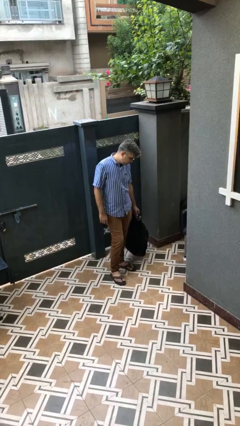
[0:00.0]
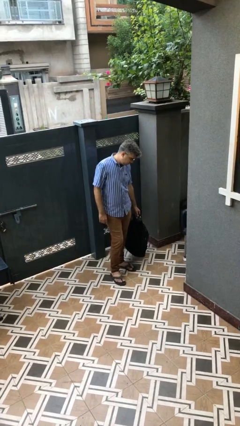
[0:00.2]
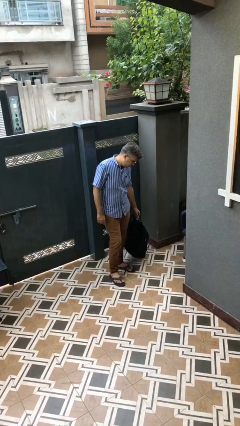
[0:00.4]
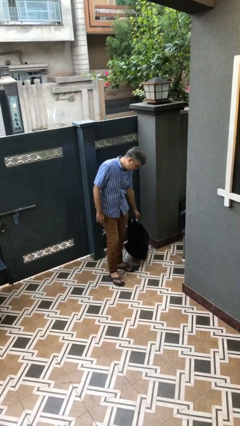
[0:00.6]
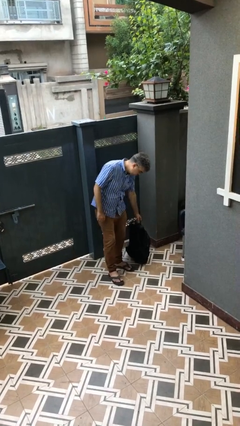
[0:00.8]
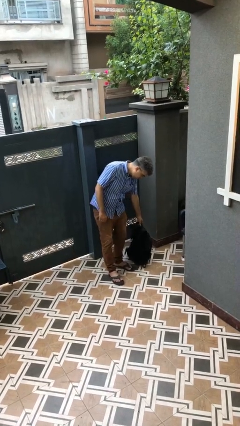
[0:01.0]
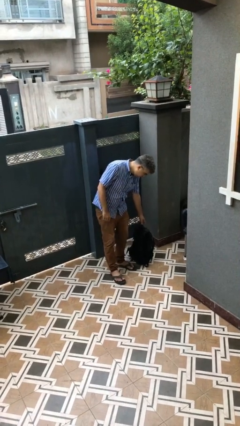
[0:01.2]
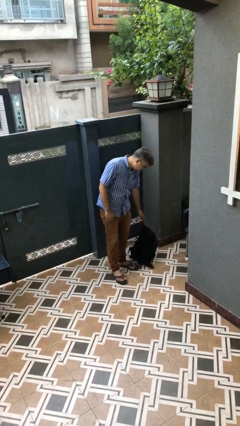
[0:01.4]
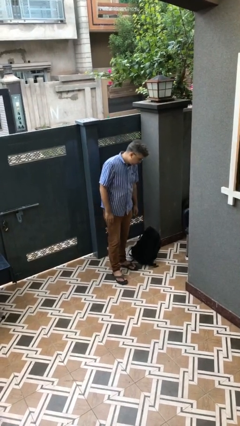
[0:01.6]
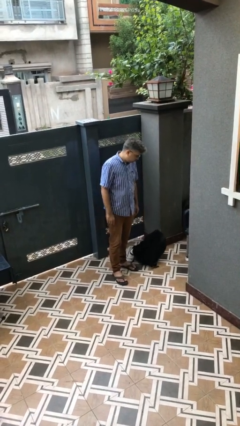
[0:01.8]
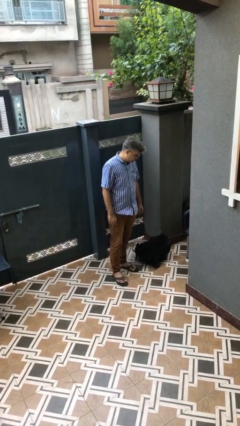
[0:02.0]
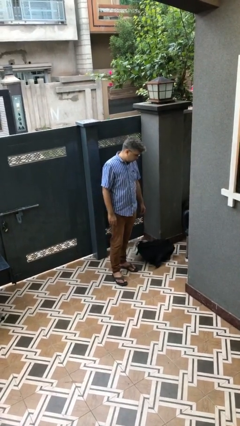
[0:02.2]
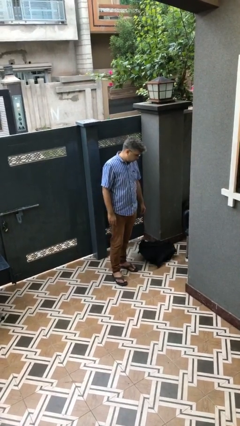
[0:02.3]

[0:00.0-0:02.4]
person puts down object on floor

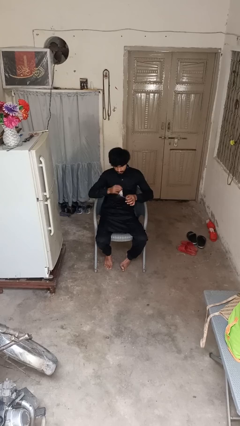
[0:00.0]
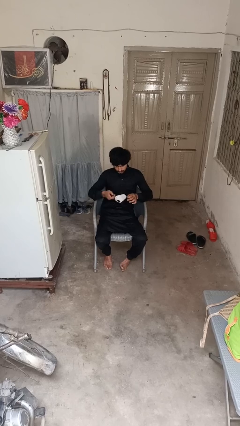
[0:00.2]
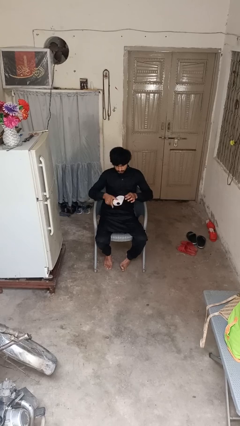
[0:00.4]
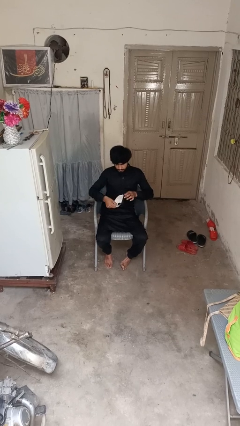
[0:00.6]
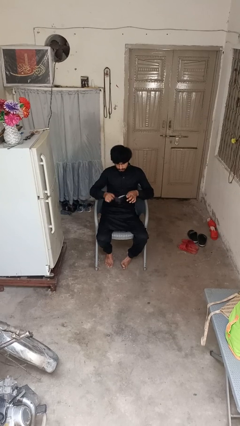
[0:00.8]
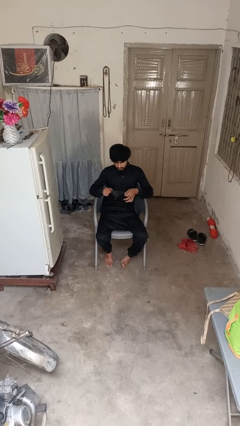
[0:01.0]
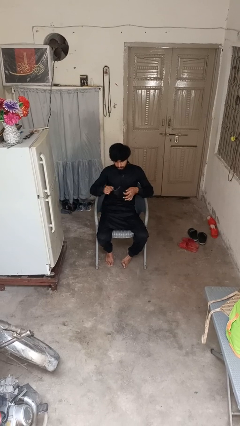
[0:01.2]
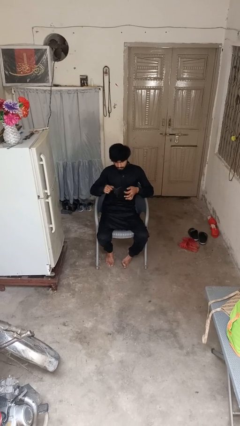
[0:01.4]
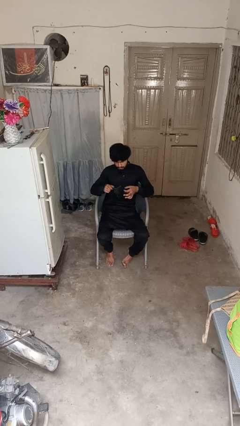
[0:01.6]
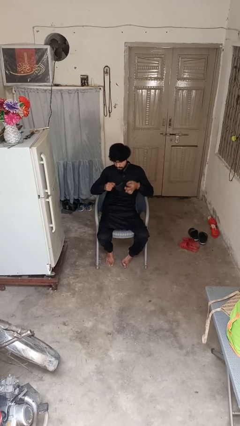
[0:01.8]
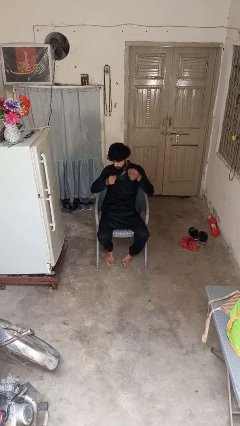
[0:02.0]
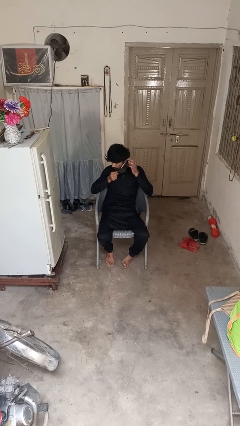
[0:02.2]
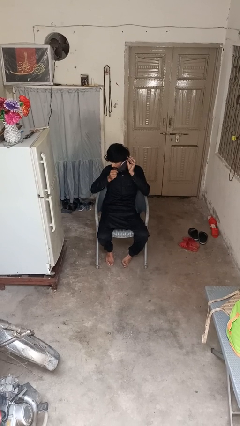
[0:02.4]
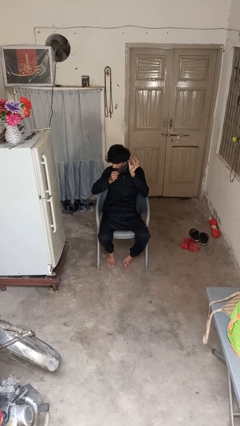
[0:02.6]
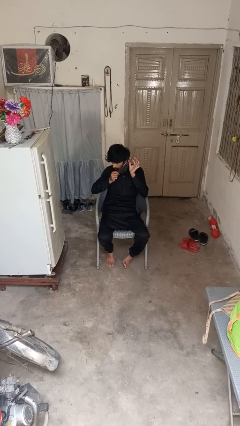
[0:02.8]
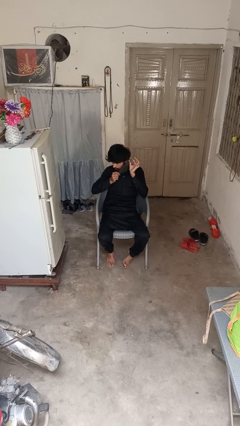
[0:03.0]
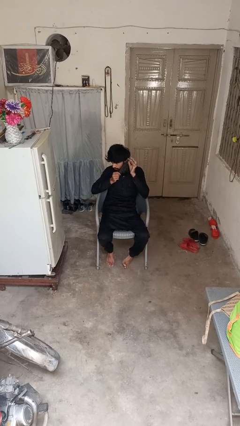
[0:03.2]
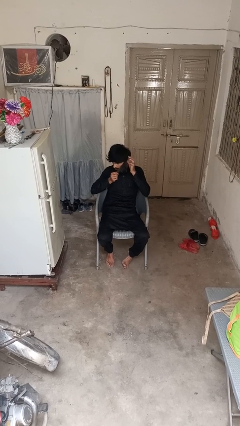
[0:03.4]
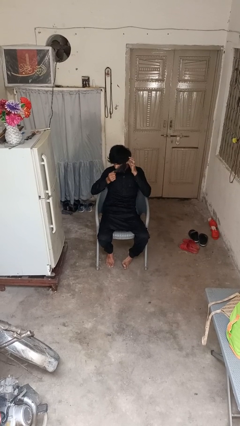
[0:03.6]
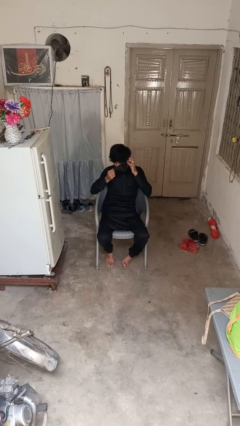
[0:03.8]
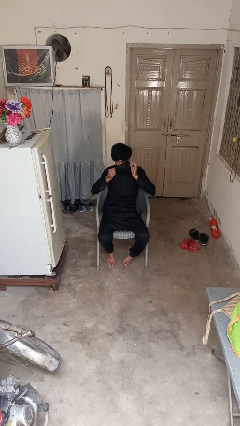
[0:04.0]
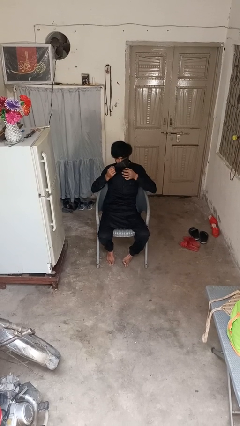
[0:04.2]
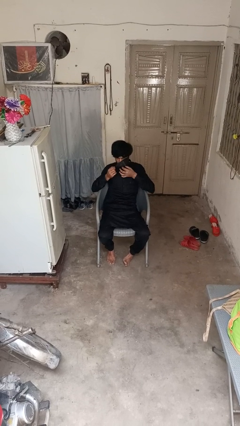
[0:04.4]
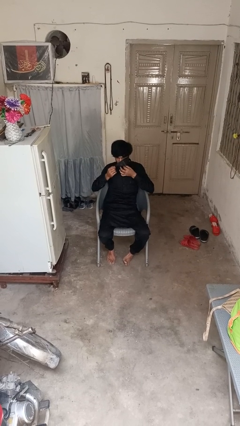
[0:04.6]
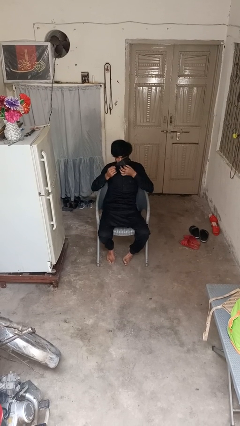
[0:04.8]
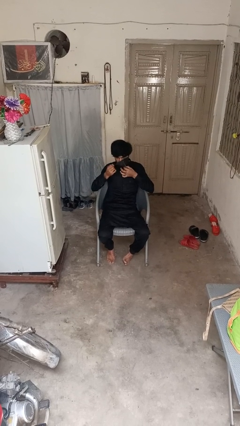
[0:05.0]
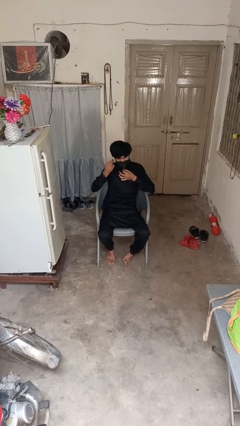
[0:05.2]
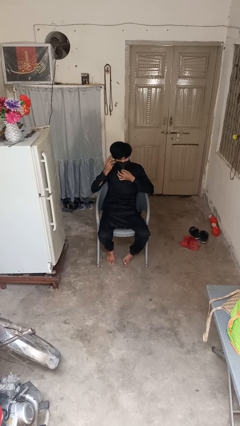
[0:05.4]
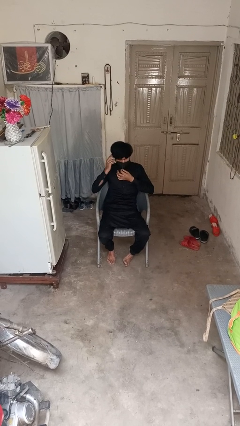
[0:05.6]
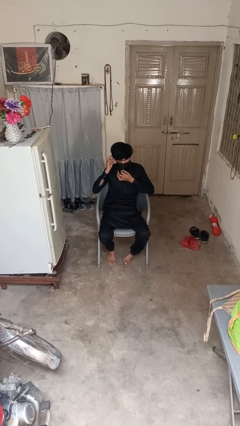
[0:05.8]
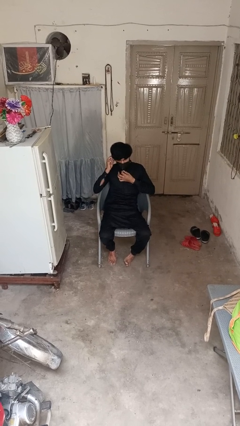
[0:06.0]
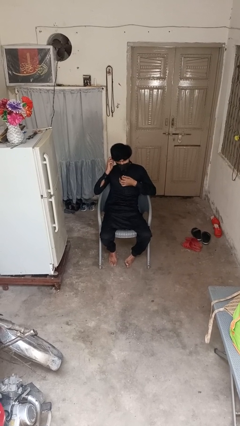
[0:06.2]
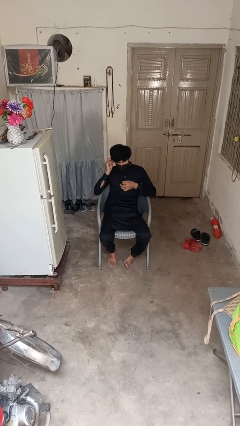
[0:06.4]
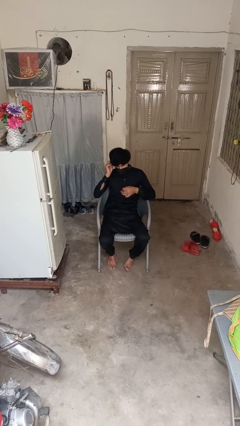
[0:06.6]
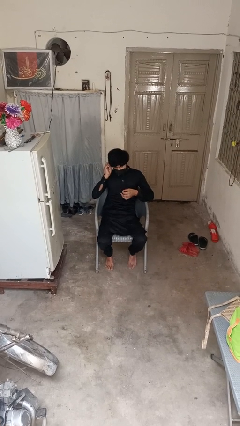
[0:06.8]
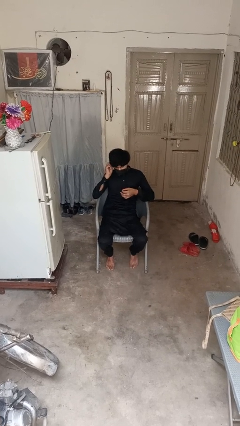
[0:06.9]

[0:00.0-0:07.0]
person puts on facemask

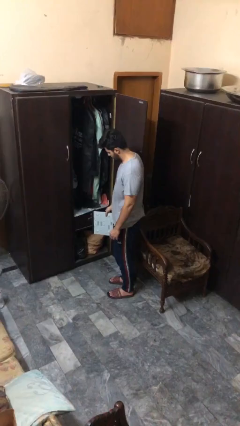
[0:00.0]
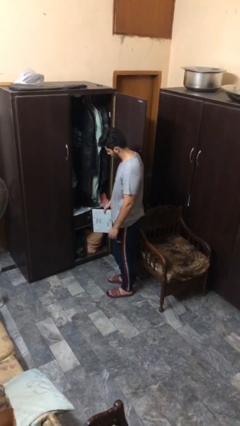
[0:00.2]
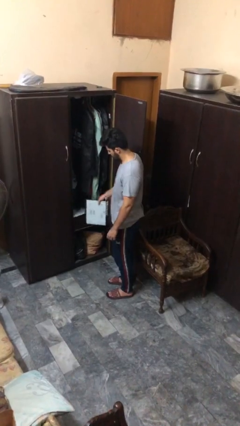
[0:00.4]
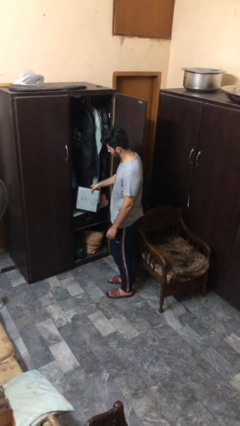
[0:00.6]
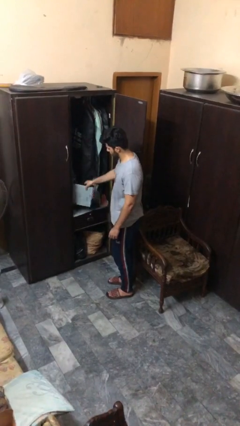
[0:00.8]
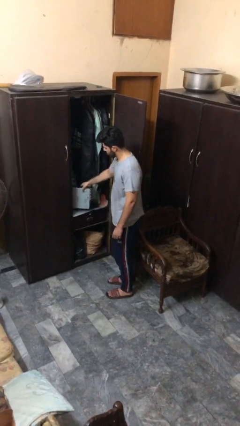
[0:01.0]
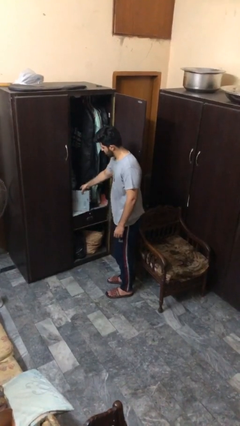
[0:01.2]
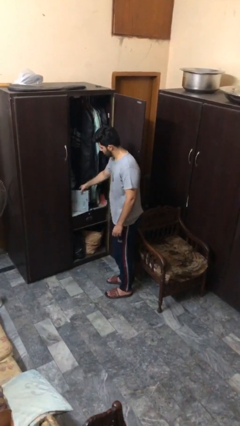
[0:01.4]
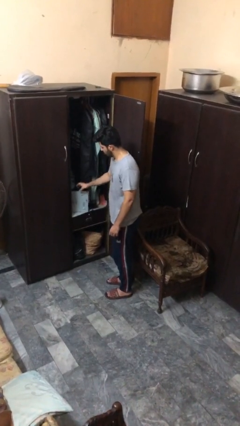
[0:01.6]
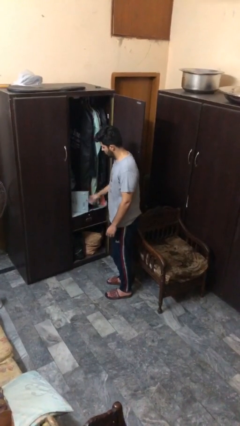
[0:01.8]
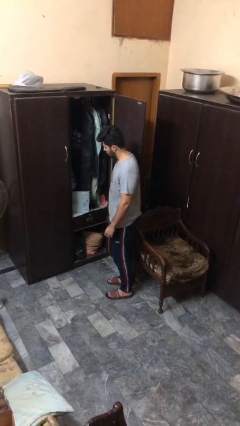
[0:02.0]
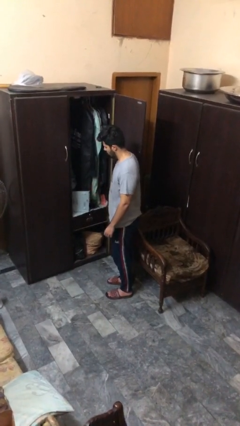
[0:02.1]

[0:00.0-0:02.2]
person puts down object on countertop

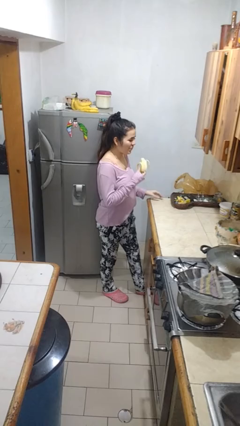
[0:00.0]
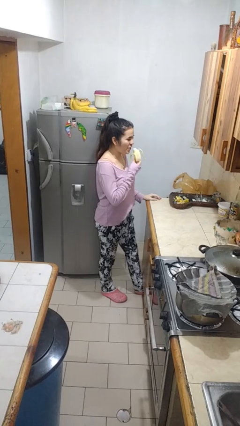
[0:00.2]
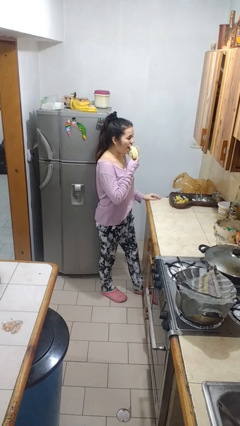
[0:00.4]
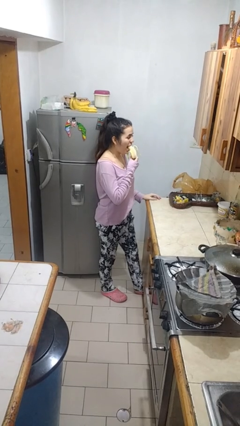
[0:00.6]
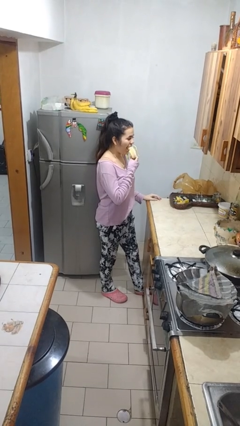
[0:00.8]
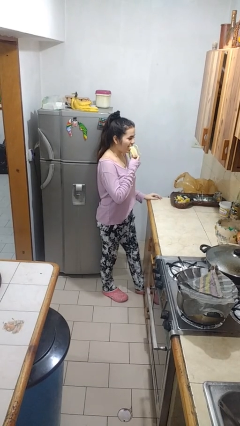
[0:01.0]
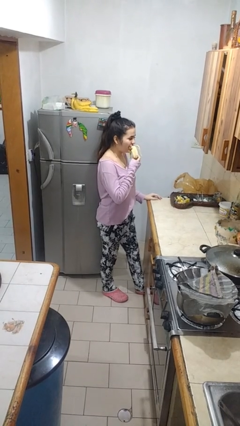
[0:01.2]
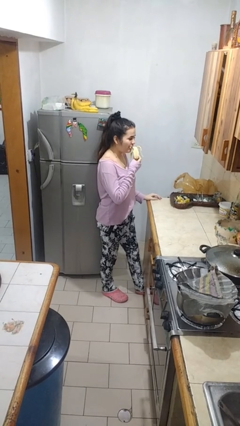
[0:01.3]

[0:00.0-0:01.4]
person eats banana

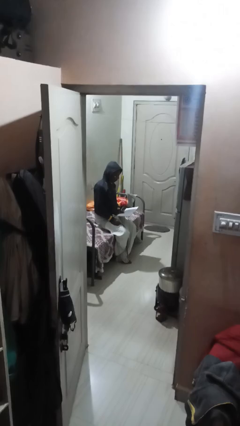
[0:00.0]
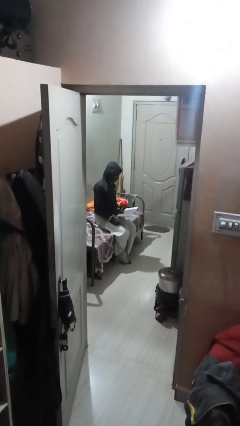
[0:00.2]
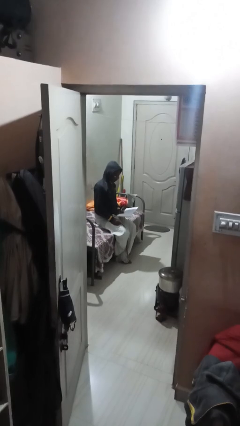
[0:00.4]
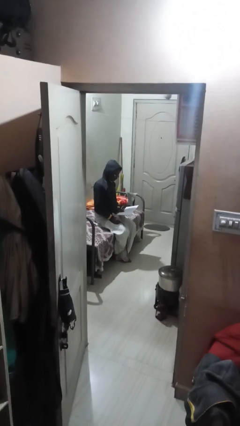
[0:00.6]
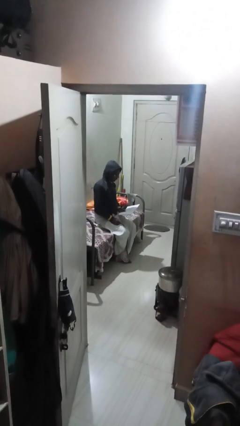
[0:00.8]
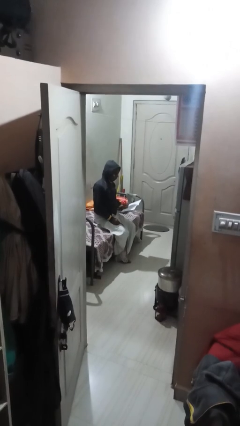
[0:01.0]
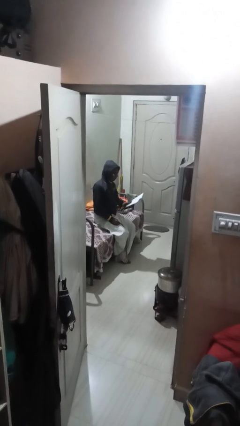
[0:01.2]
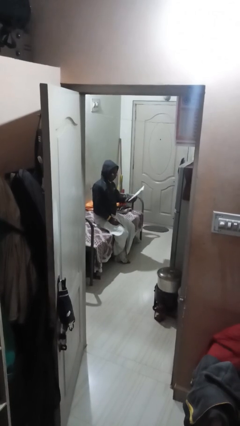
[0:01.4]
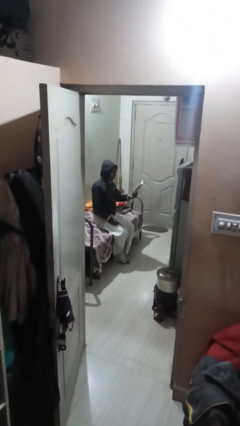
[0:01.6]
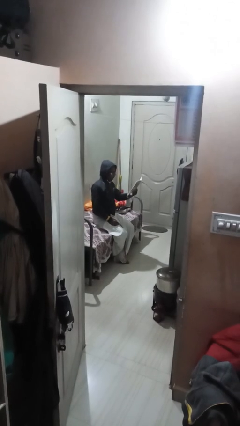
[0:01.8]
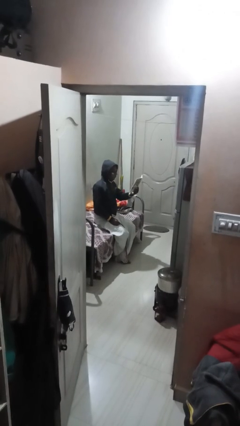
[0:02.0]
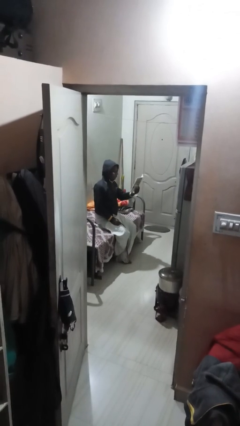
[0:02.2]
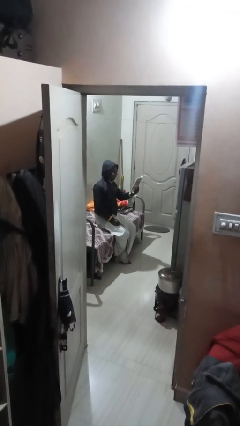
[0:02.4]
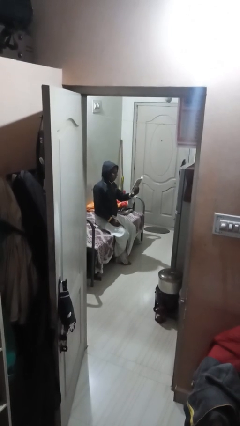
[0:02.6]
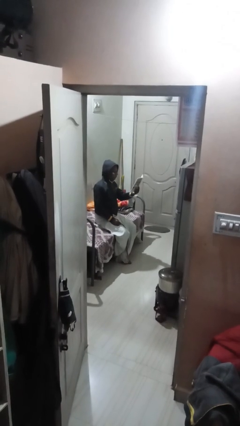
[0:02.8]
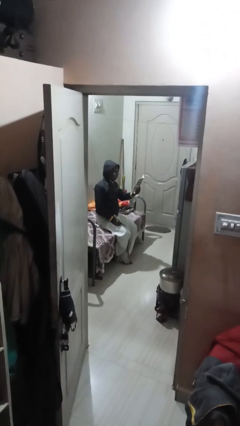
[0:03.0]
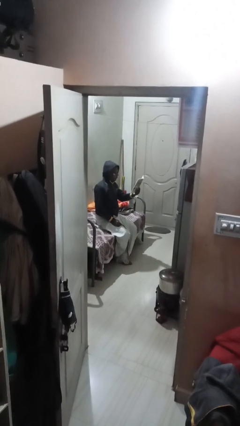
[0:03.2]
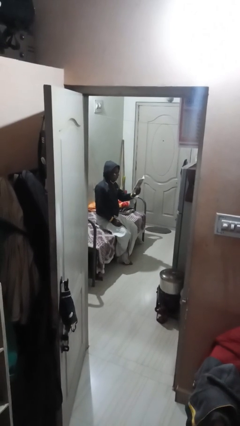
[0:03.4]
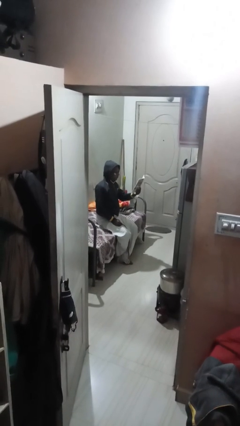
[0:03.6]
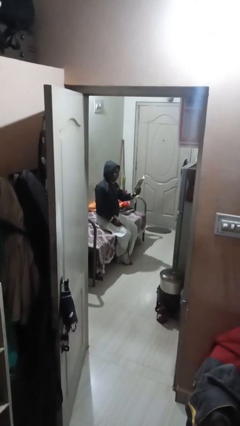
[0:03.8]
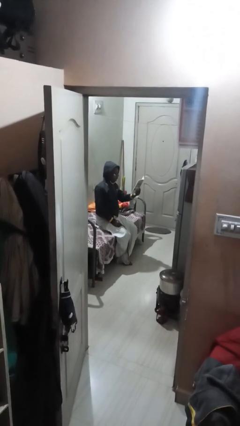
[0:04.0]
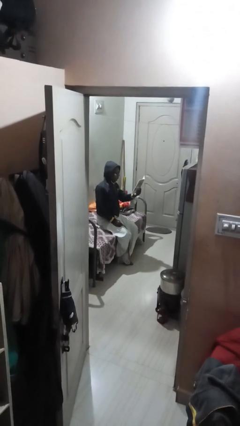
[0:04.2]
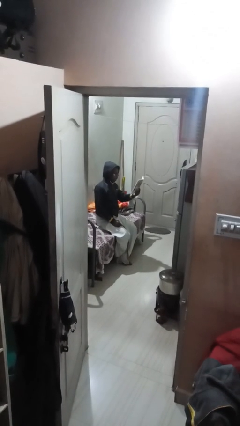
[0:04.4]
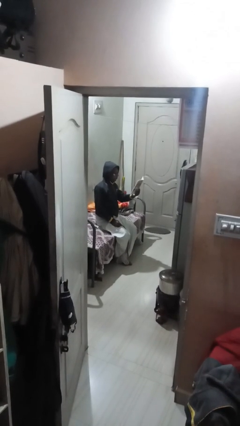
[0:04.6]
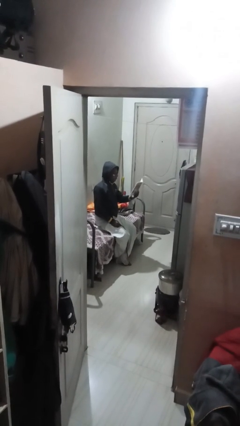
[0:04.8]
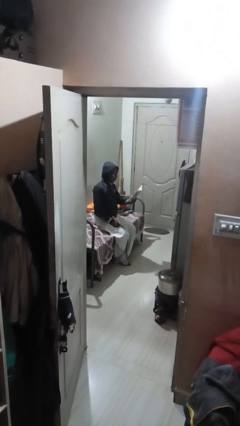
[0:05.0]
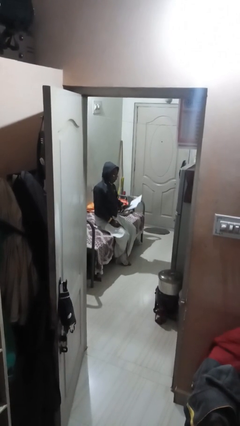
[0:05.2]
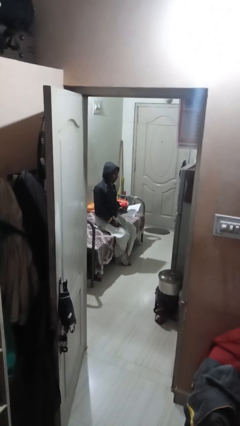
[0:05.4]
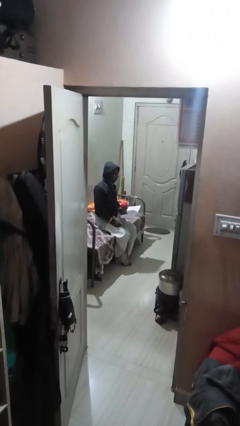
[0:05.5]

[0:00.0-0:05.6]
person reads document
